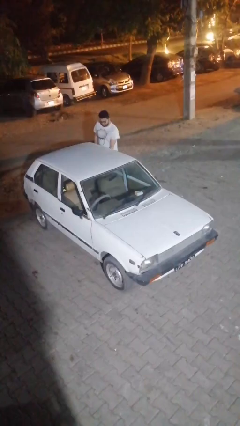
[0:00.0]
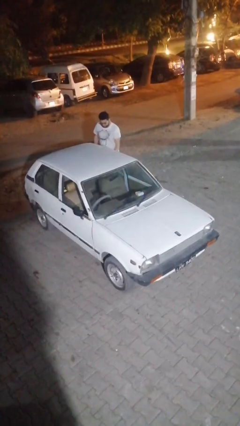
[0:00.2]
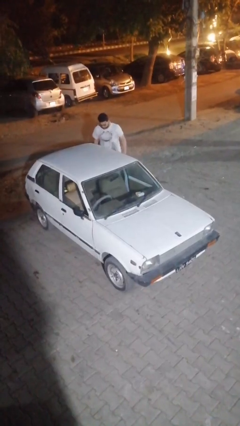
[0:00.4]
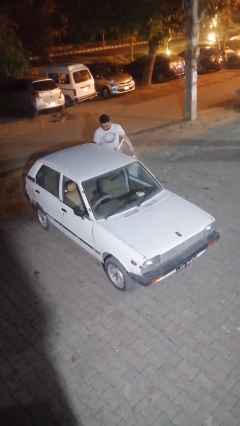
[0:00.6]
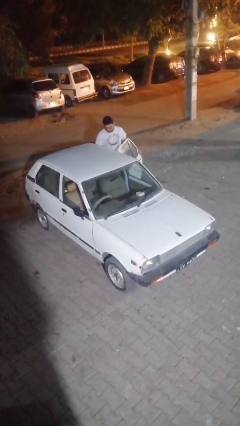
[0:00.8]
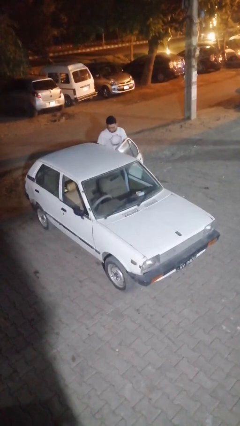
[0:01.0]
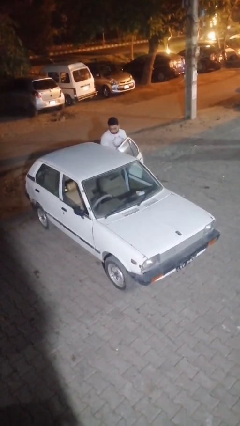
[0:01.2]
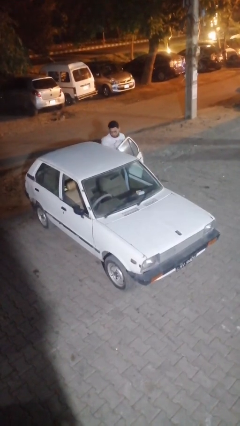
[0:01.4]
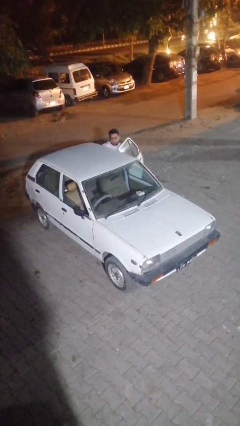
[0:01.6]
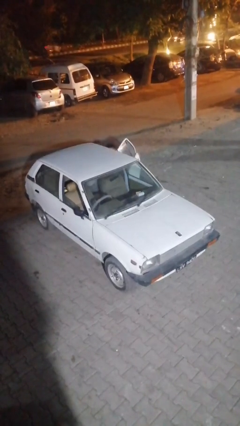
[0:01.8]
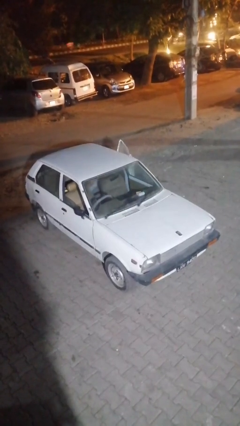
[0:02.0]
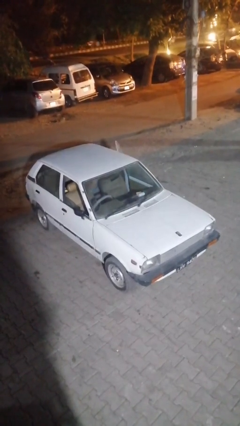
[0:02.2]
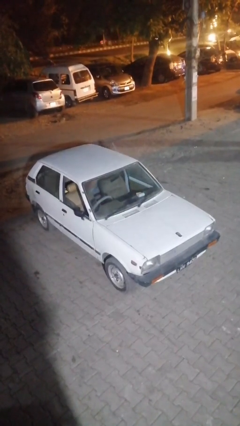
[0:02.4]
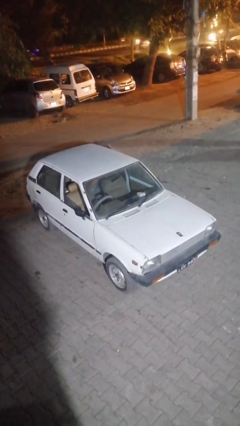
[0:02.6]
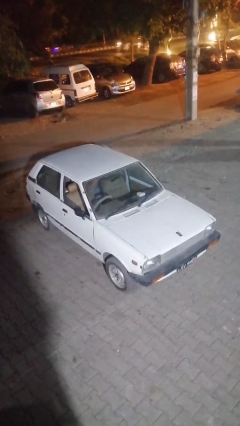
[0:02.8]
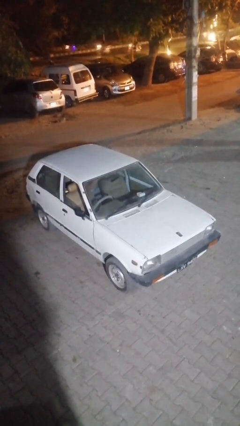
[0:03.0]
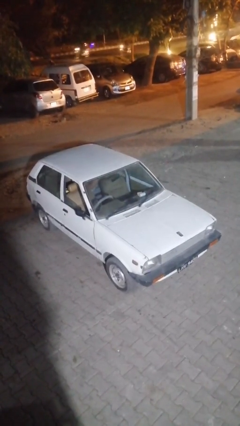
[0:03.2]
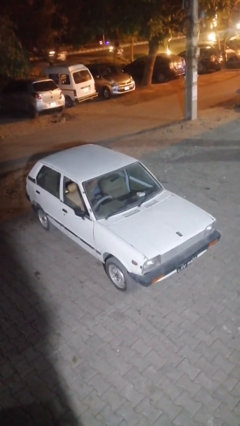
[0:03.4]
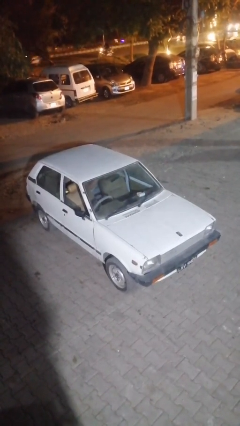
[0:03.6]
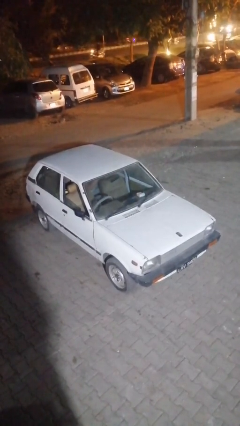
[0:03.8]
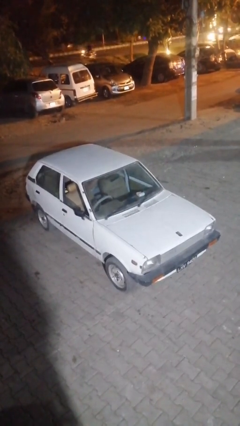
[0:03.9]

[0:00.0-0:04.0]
car picks up person

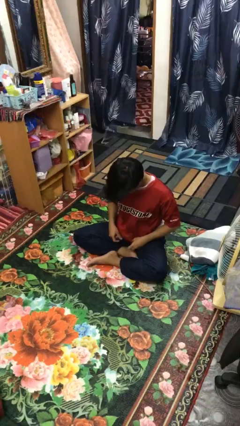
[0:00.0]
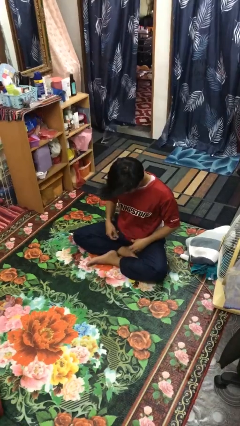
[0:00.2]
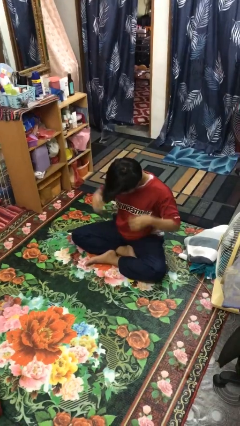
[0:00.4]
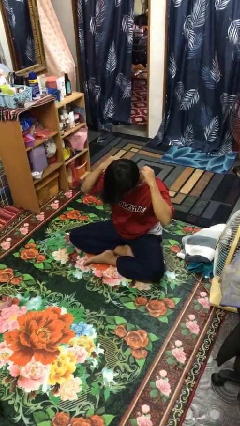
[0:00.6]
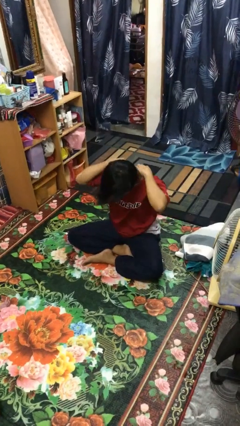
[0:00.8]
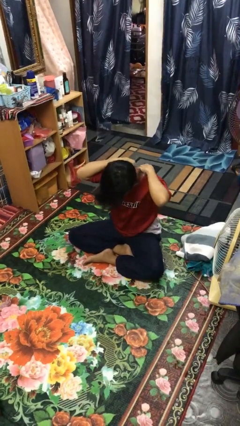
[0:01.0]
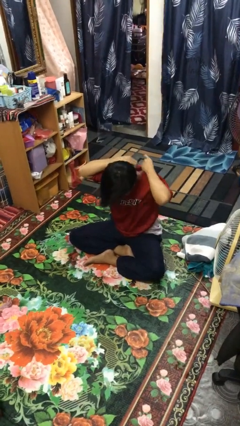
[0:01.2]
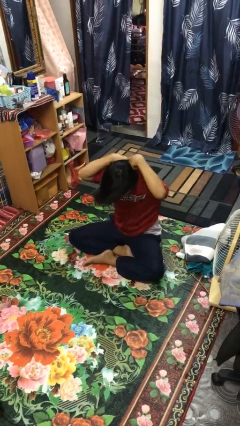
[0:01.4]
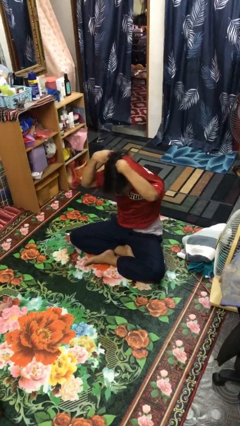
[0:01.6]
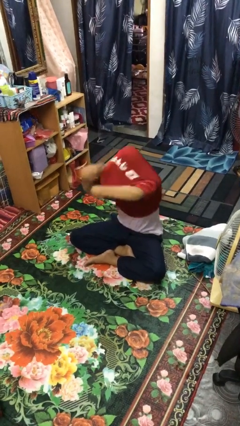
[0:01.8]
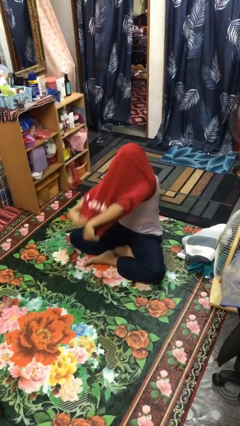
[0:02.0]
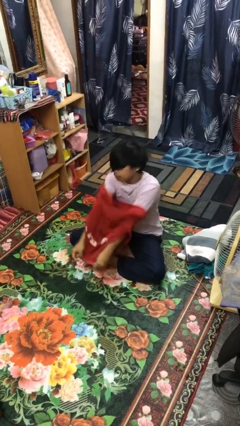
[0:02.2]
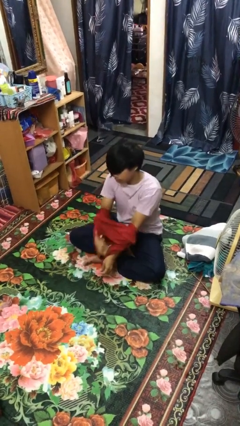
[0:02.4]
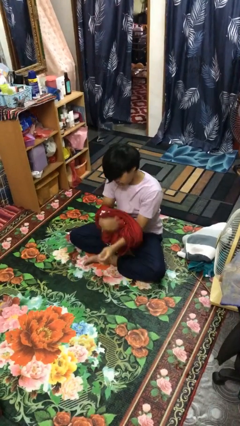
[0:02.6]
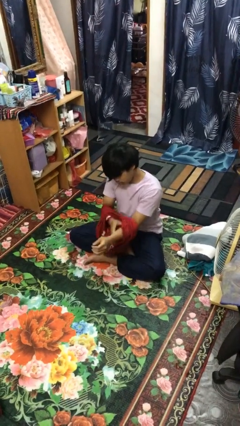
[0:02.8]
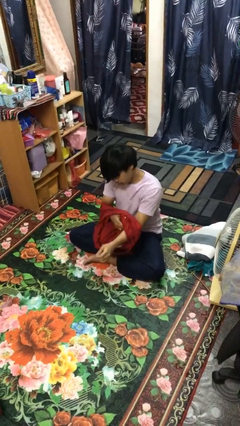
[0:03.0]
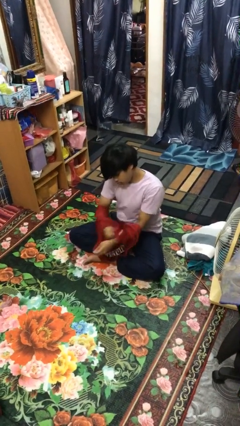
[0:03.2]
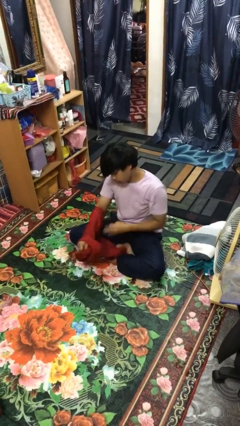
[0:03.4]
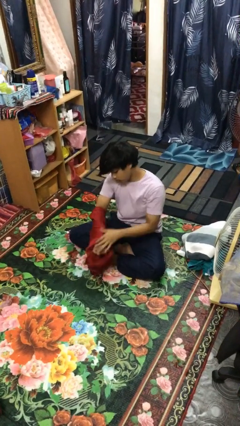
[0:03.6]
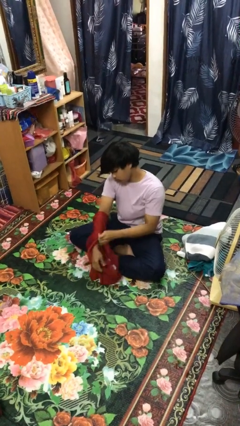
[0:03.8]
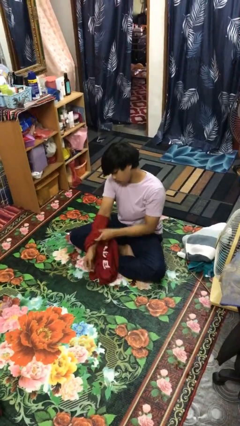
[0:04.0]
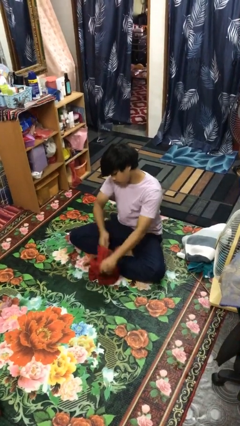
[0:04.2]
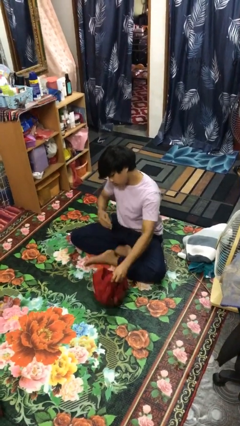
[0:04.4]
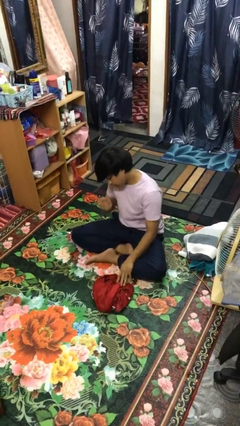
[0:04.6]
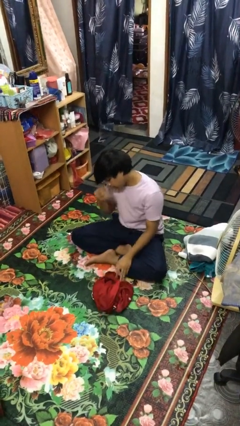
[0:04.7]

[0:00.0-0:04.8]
person takes off shirt

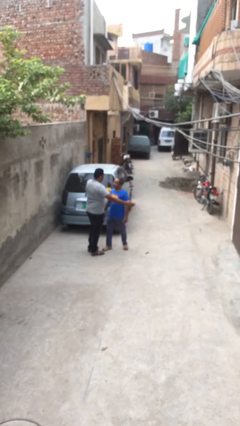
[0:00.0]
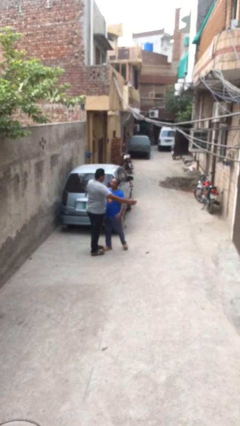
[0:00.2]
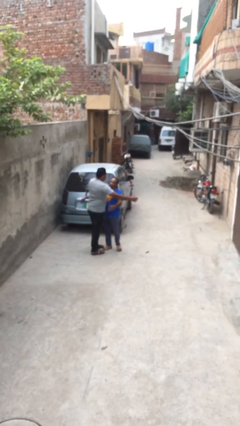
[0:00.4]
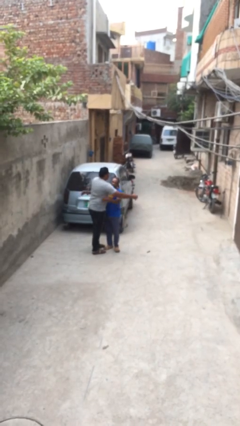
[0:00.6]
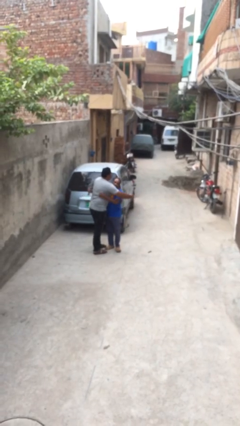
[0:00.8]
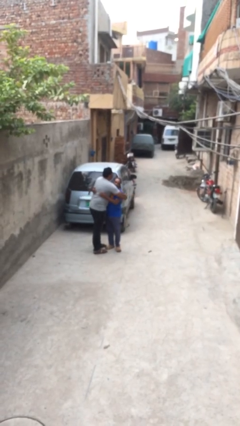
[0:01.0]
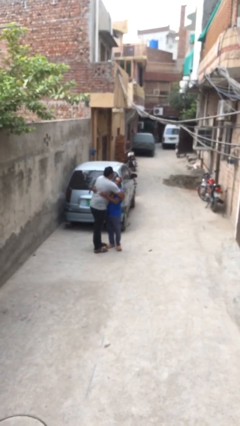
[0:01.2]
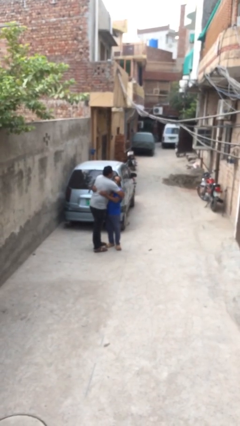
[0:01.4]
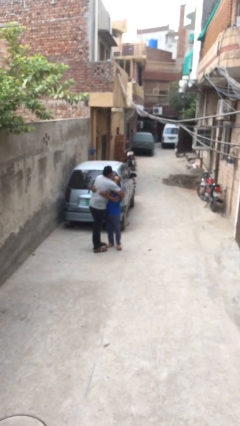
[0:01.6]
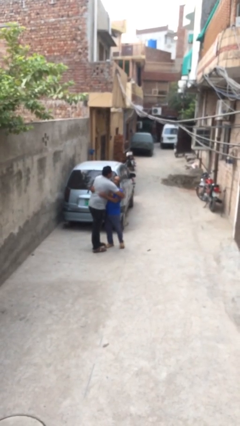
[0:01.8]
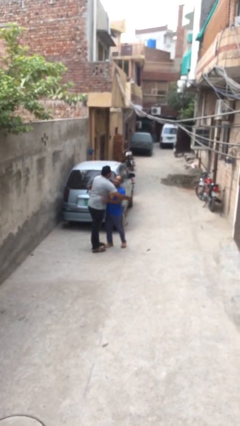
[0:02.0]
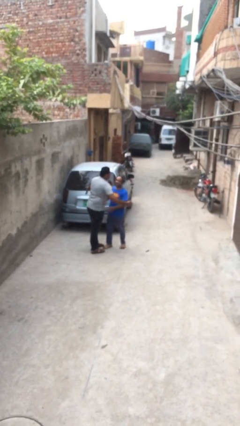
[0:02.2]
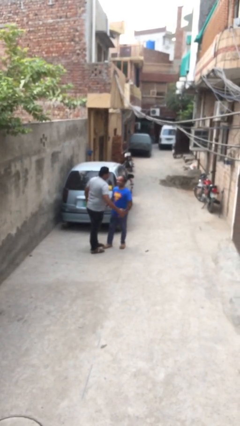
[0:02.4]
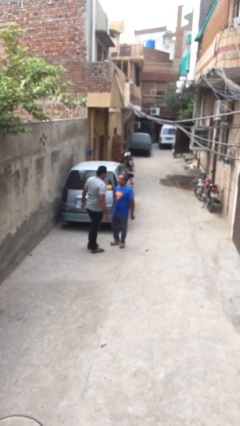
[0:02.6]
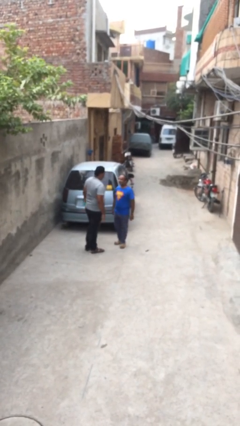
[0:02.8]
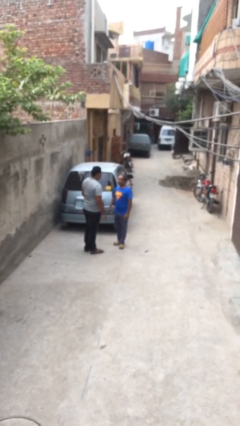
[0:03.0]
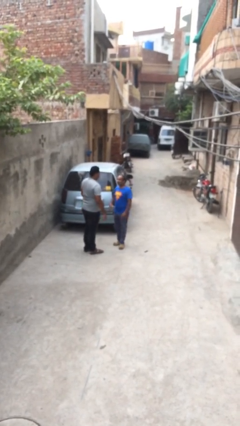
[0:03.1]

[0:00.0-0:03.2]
person embraces person

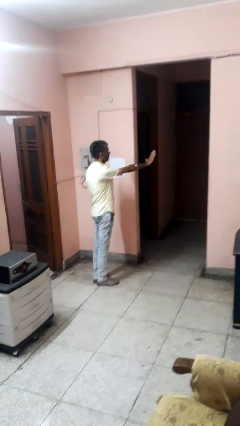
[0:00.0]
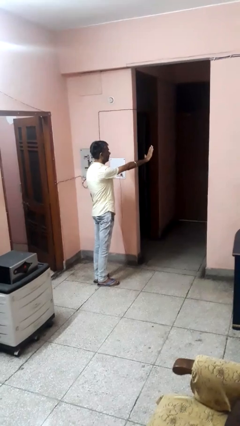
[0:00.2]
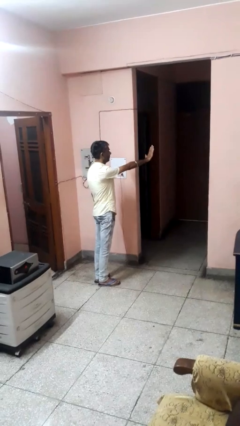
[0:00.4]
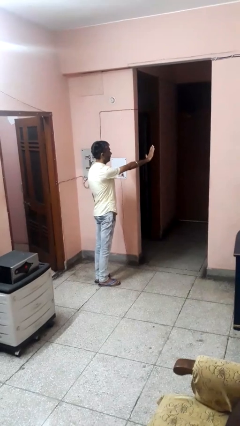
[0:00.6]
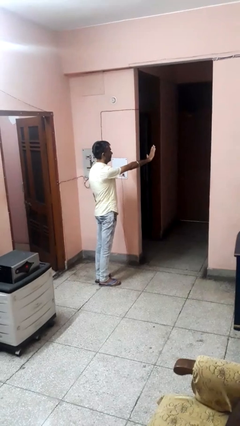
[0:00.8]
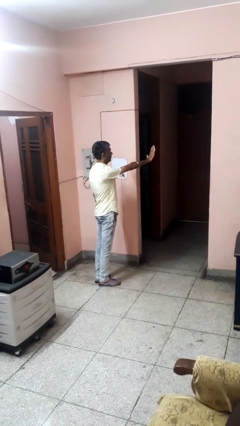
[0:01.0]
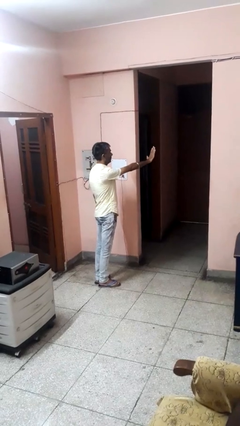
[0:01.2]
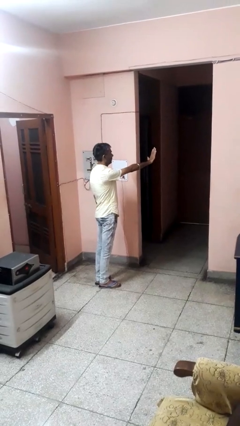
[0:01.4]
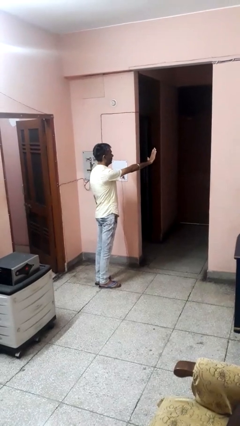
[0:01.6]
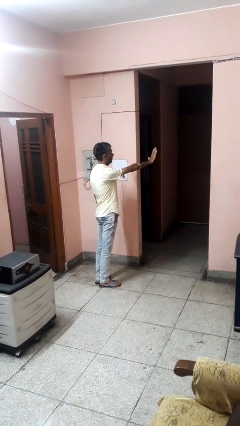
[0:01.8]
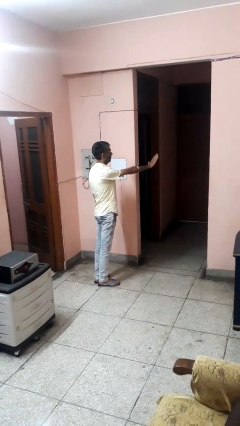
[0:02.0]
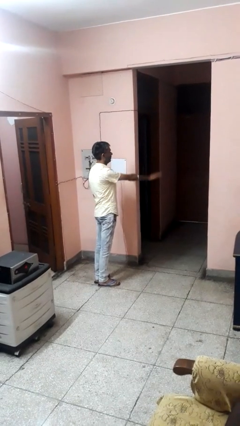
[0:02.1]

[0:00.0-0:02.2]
person gestures stop

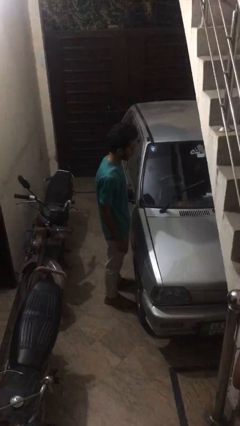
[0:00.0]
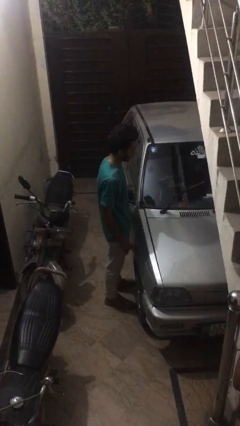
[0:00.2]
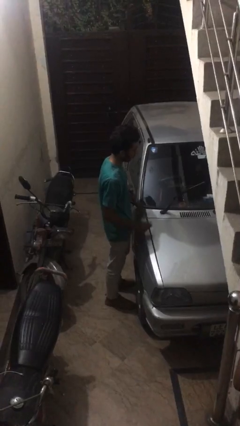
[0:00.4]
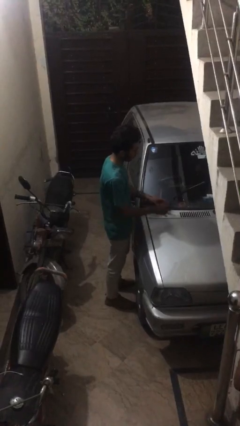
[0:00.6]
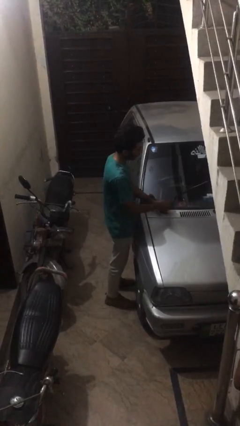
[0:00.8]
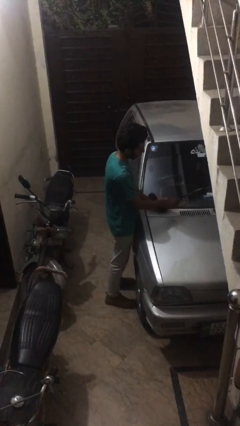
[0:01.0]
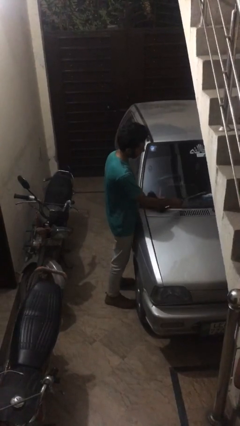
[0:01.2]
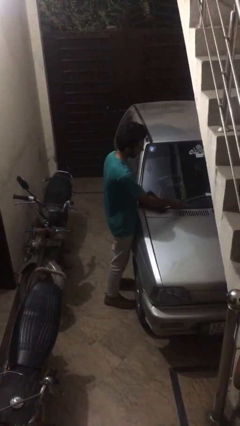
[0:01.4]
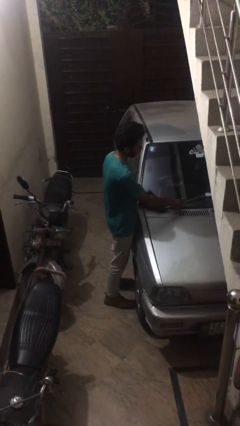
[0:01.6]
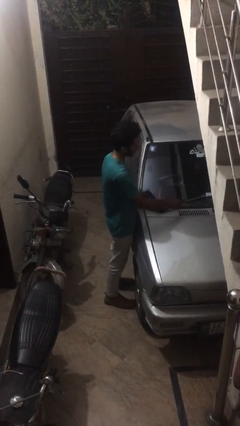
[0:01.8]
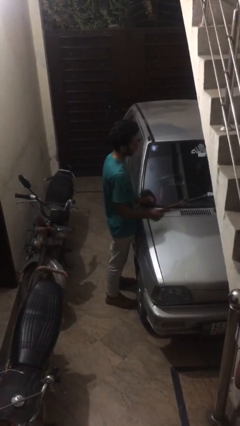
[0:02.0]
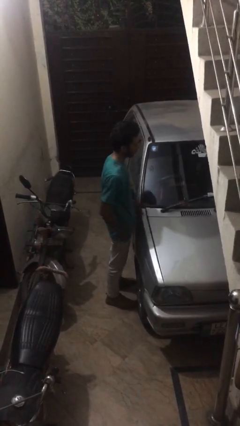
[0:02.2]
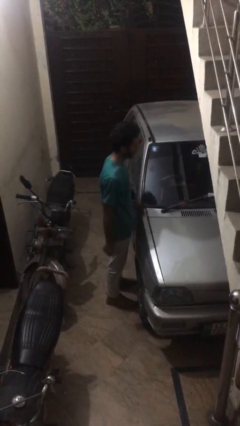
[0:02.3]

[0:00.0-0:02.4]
person flips down car wipers

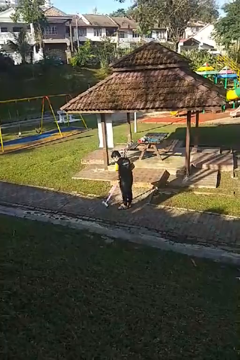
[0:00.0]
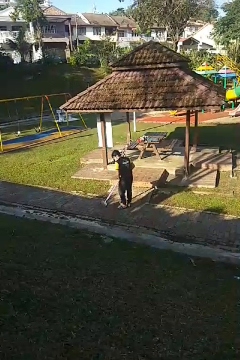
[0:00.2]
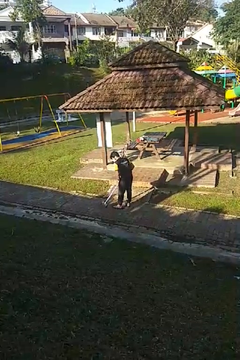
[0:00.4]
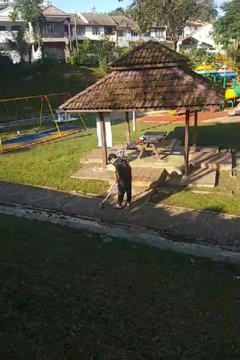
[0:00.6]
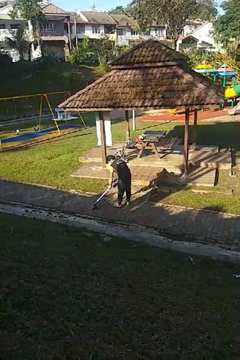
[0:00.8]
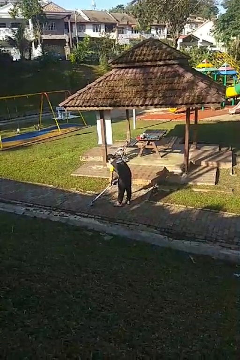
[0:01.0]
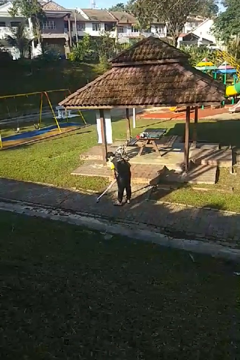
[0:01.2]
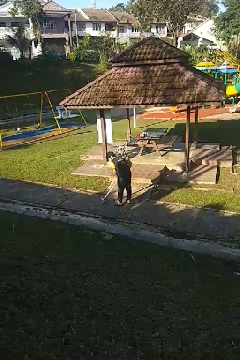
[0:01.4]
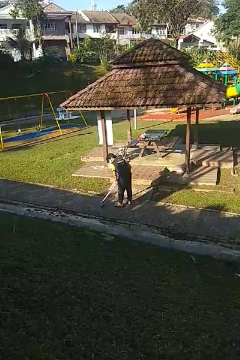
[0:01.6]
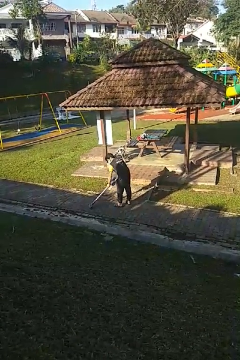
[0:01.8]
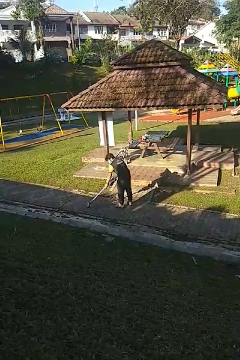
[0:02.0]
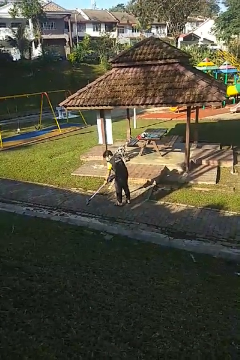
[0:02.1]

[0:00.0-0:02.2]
person vacuums carpet
